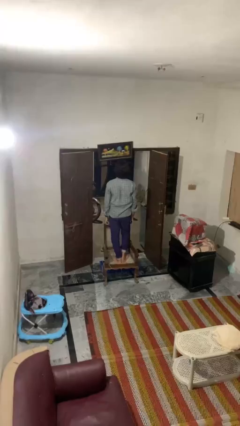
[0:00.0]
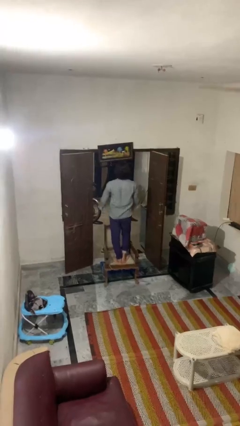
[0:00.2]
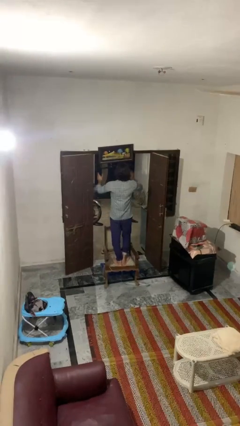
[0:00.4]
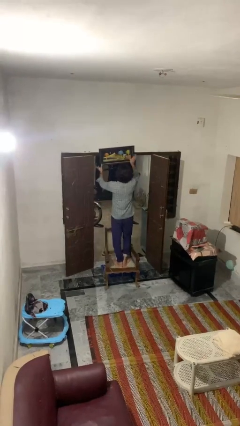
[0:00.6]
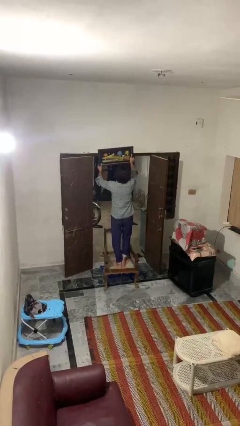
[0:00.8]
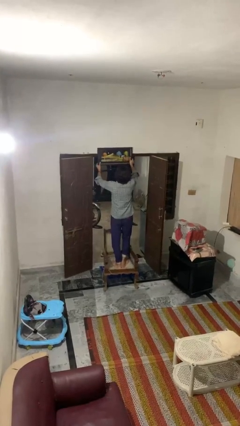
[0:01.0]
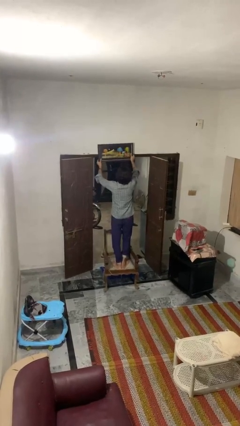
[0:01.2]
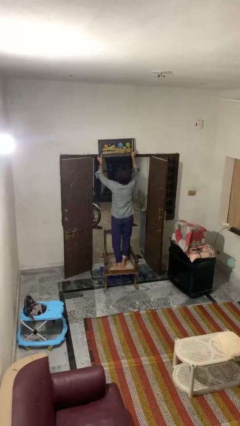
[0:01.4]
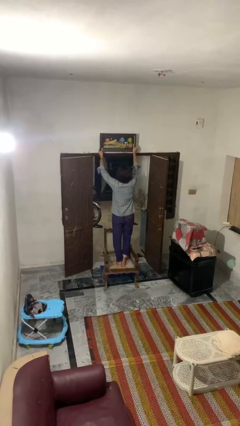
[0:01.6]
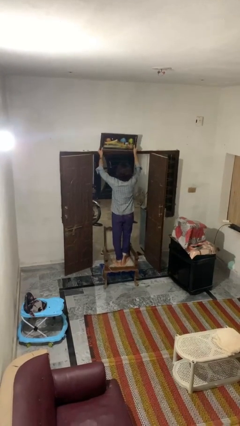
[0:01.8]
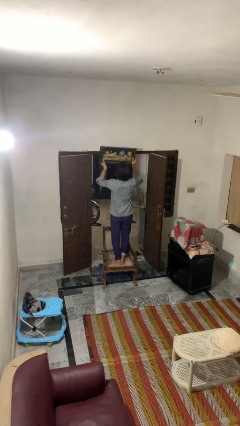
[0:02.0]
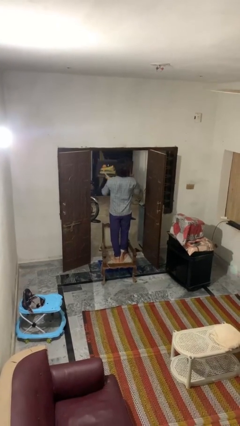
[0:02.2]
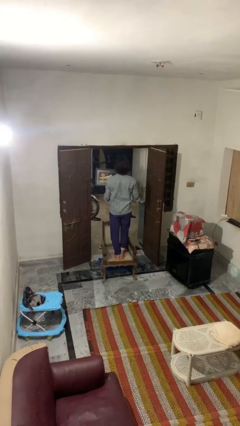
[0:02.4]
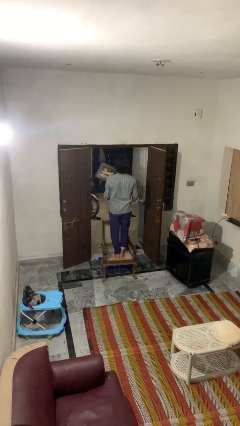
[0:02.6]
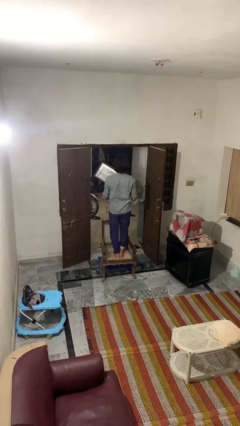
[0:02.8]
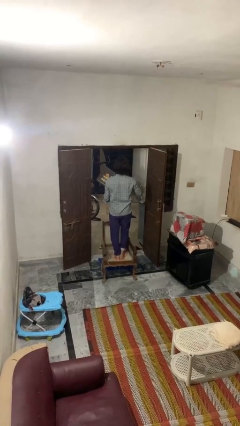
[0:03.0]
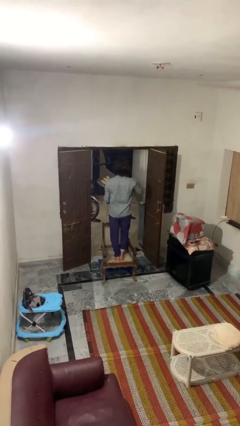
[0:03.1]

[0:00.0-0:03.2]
person takes down picture frame

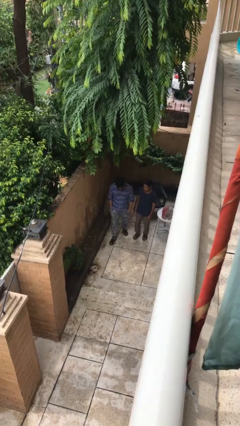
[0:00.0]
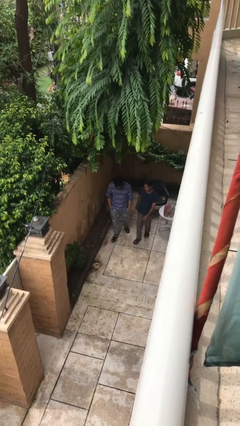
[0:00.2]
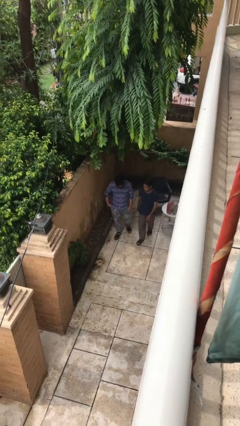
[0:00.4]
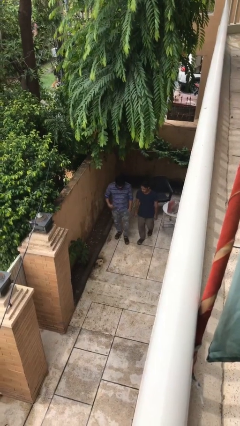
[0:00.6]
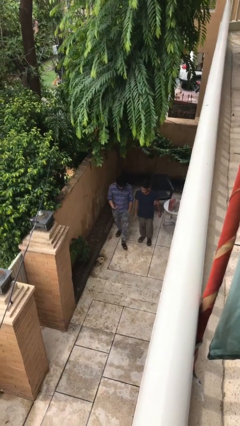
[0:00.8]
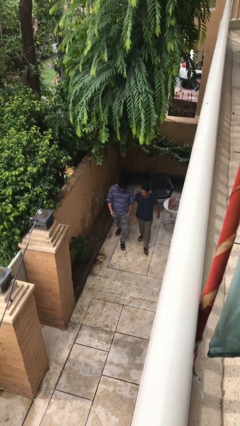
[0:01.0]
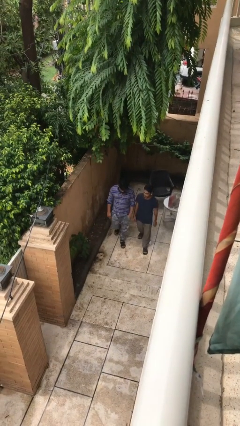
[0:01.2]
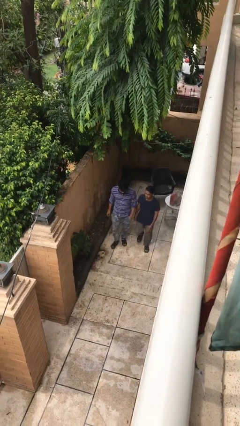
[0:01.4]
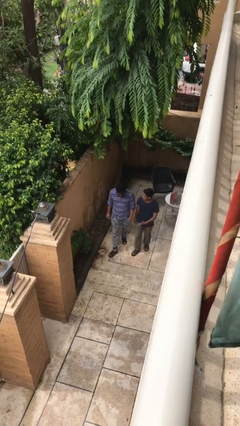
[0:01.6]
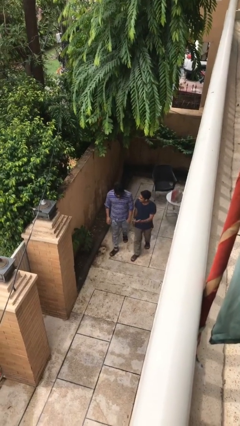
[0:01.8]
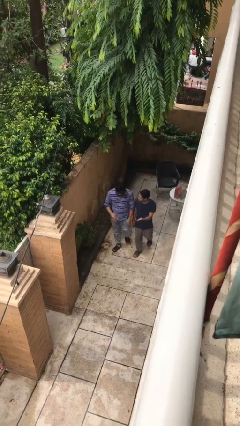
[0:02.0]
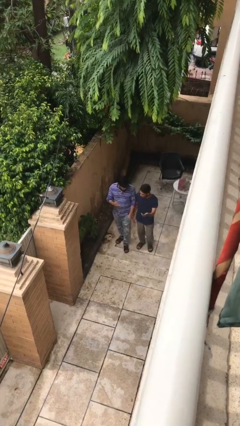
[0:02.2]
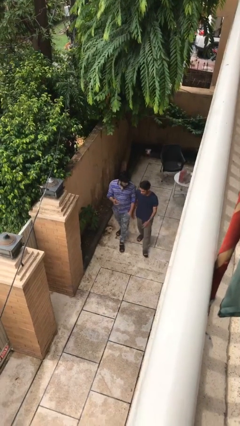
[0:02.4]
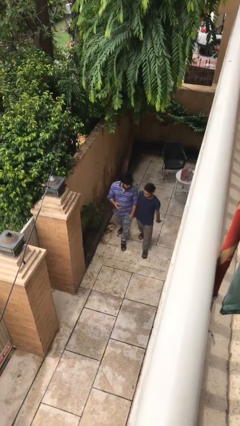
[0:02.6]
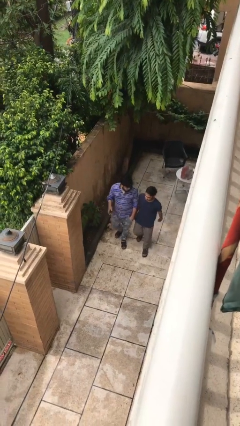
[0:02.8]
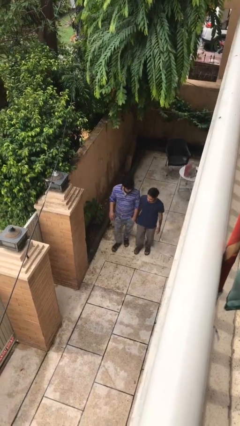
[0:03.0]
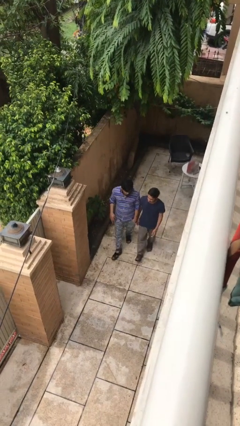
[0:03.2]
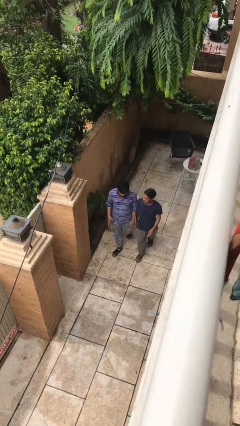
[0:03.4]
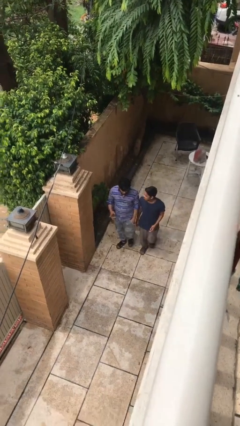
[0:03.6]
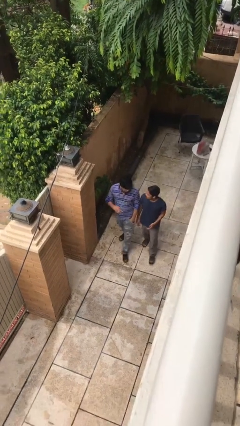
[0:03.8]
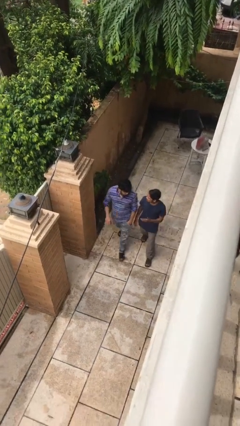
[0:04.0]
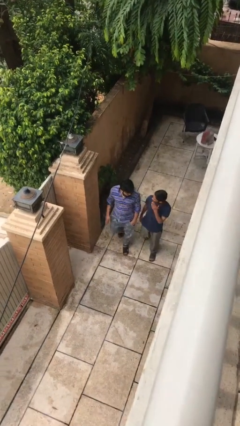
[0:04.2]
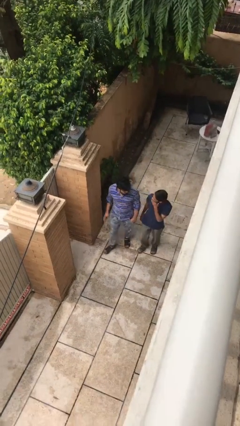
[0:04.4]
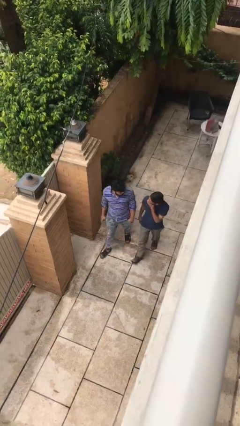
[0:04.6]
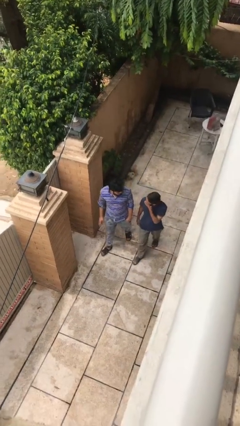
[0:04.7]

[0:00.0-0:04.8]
person talks to person

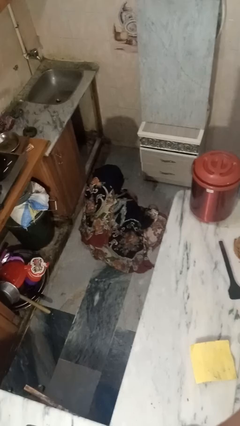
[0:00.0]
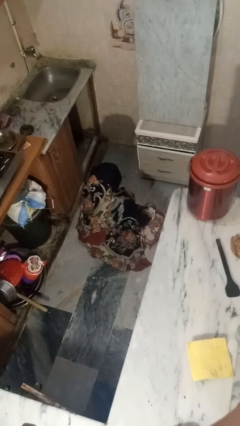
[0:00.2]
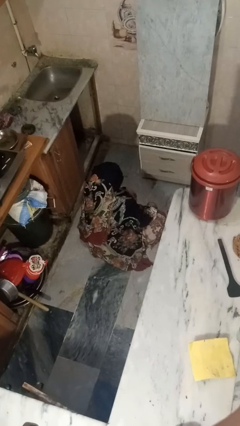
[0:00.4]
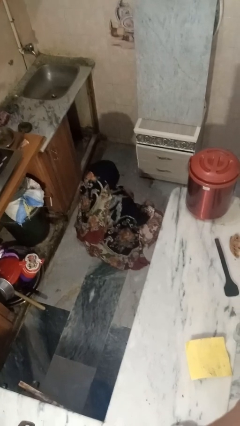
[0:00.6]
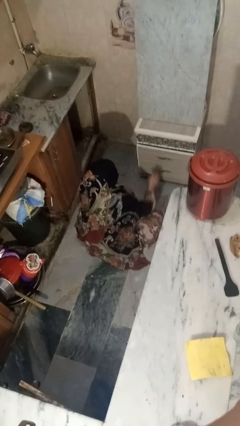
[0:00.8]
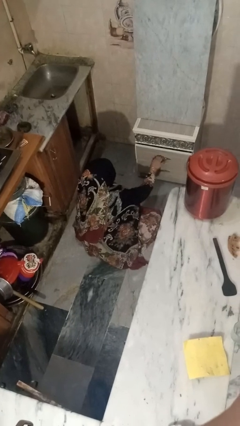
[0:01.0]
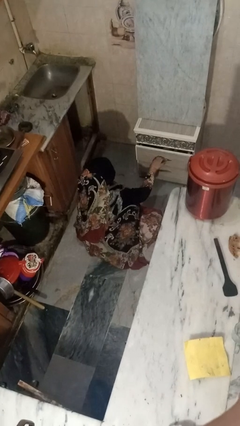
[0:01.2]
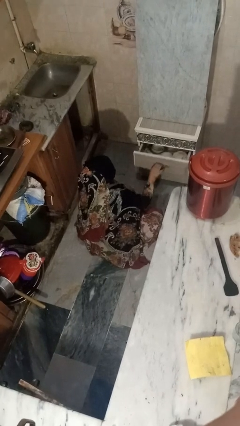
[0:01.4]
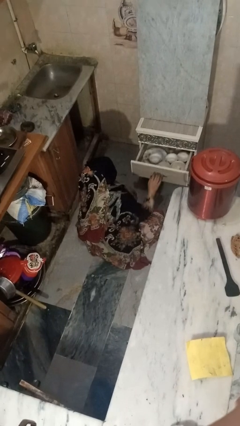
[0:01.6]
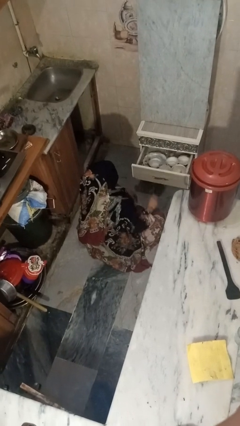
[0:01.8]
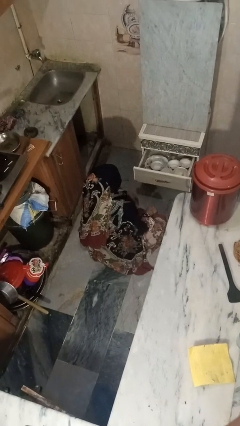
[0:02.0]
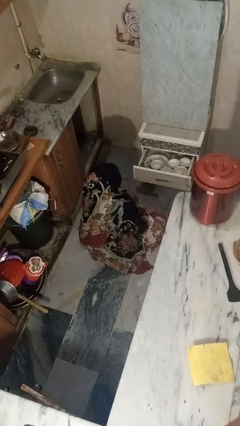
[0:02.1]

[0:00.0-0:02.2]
person opens kitchen drawer

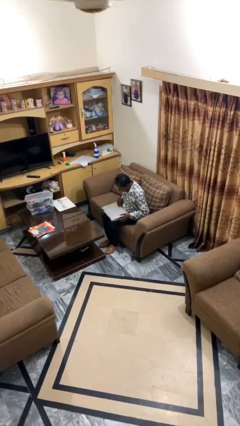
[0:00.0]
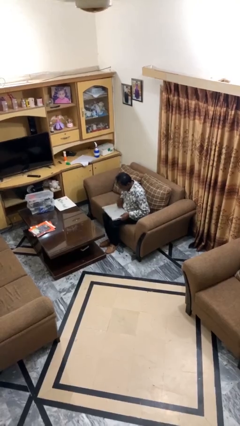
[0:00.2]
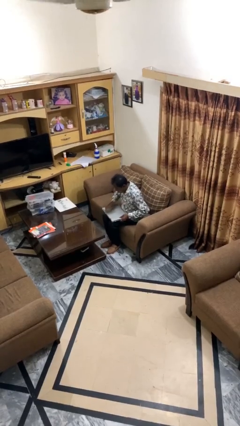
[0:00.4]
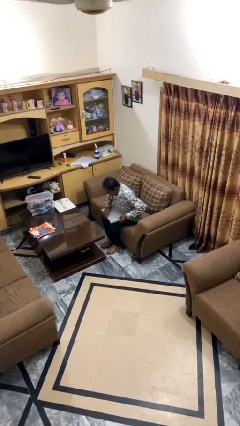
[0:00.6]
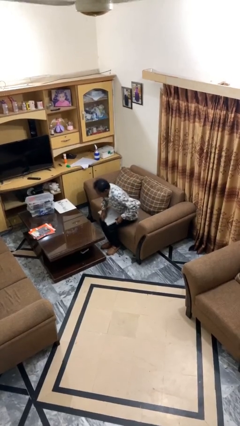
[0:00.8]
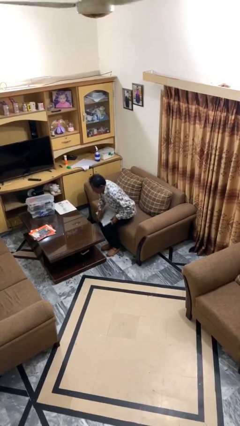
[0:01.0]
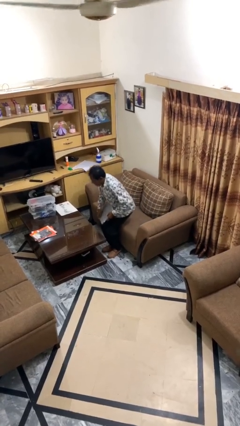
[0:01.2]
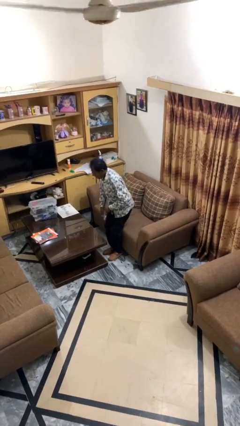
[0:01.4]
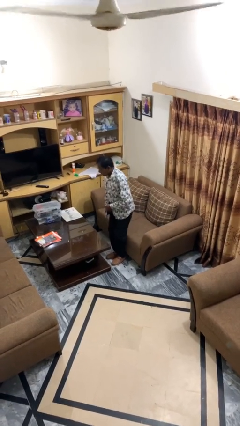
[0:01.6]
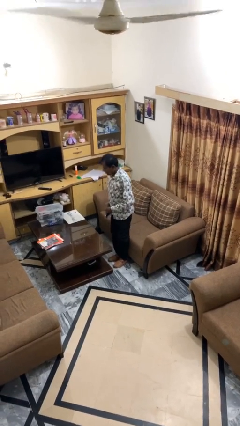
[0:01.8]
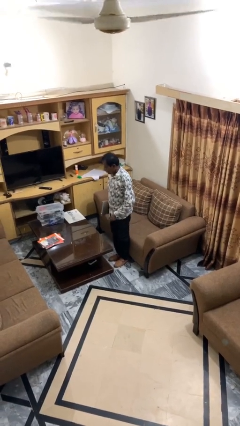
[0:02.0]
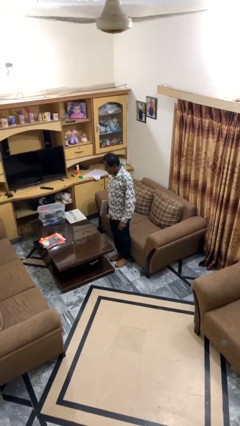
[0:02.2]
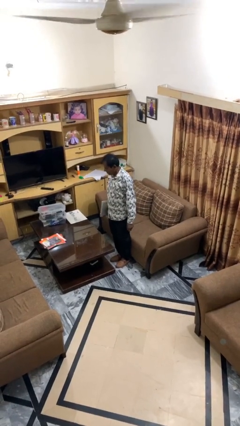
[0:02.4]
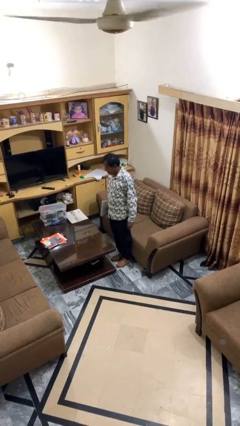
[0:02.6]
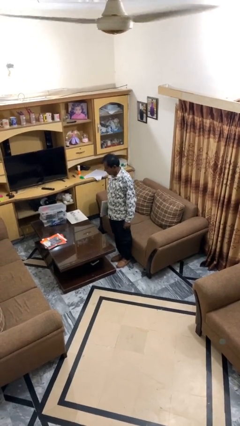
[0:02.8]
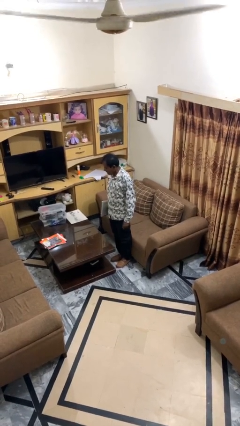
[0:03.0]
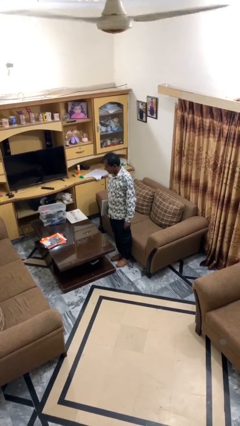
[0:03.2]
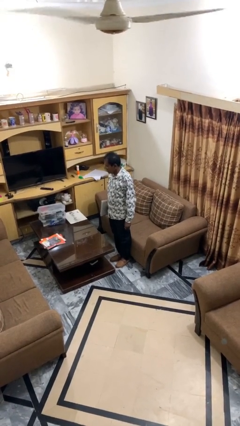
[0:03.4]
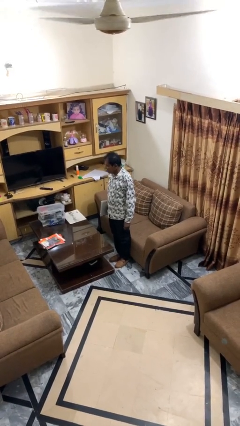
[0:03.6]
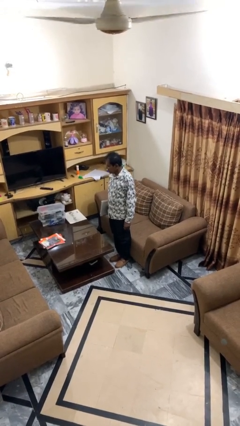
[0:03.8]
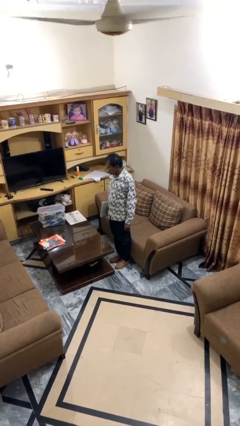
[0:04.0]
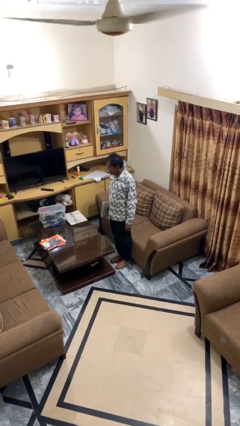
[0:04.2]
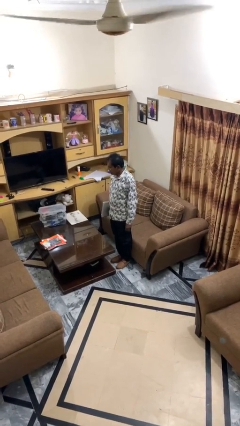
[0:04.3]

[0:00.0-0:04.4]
person stands up

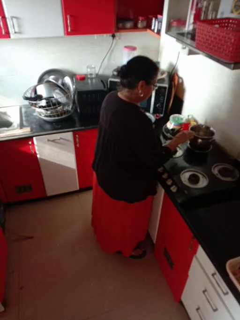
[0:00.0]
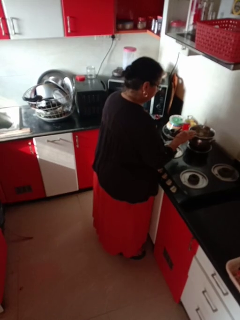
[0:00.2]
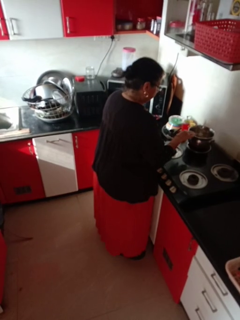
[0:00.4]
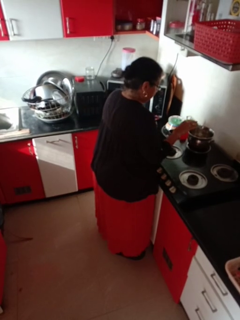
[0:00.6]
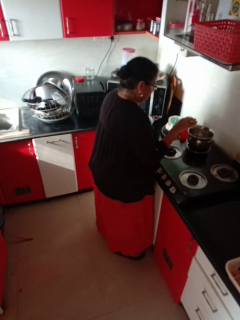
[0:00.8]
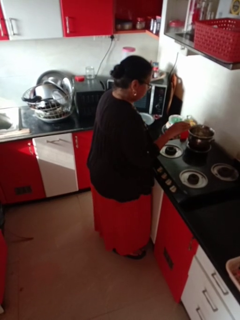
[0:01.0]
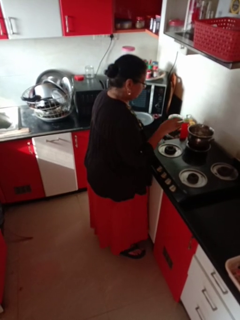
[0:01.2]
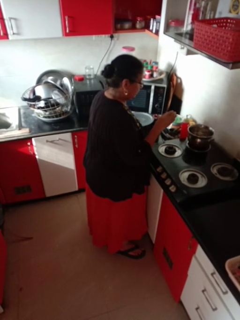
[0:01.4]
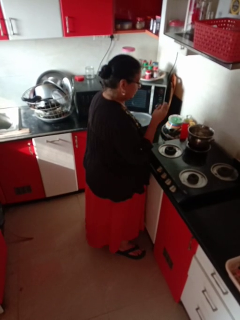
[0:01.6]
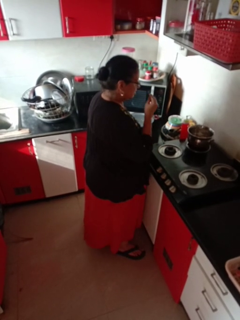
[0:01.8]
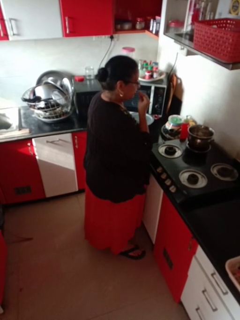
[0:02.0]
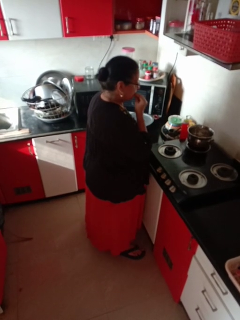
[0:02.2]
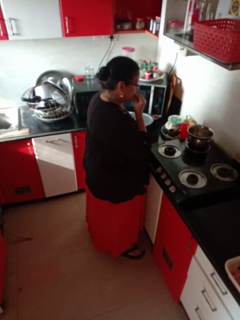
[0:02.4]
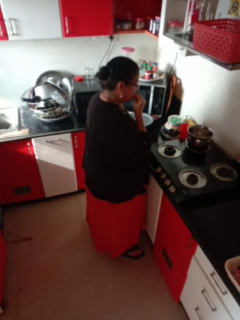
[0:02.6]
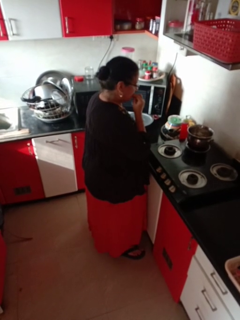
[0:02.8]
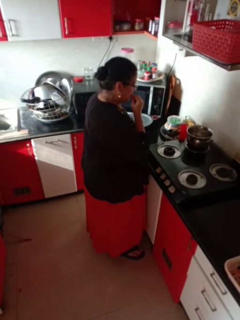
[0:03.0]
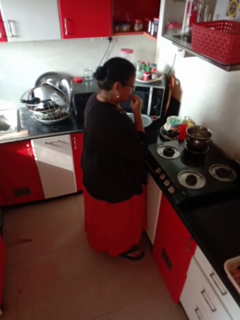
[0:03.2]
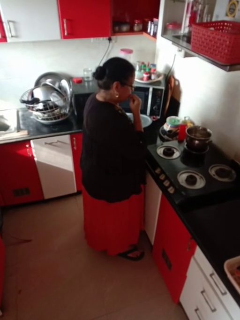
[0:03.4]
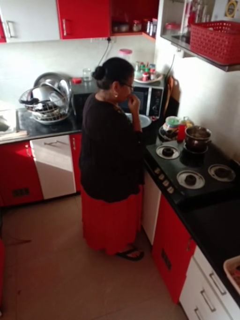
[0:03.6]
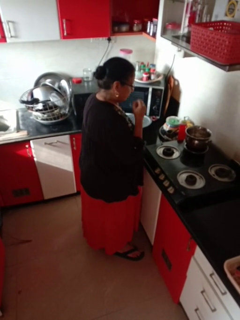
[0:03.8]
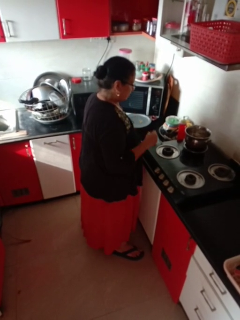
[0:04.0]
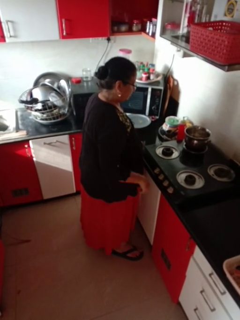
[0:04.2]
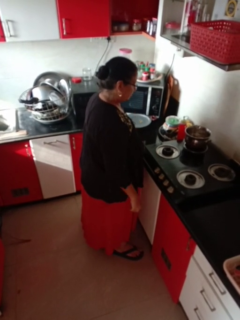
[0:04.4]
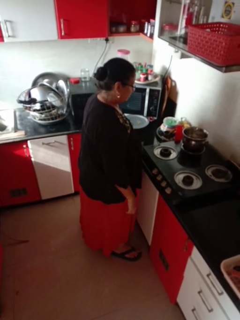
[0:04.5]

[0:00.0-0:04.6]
person burns hand
